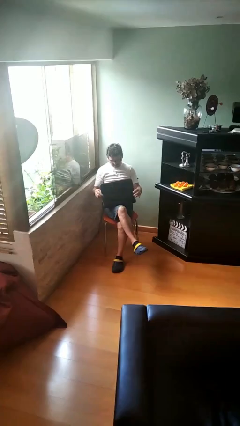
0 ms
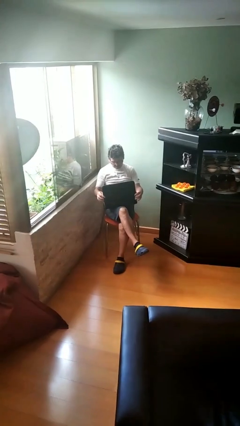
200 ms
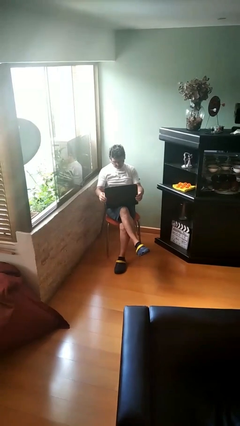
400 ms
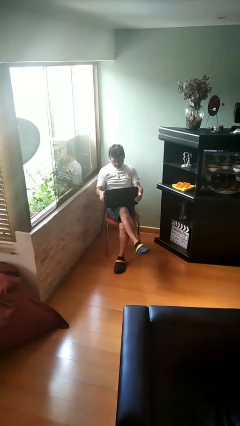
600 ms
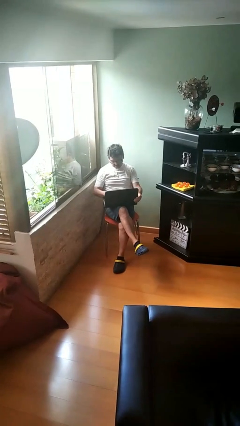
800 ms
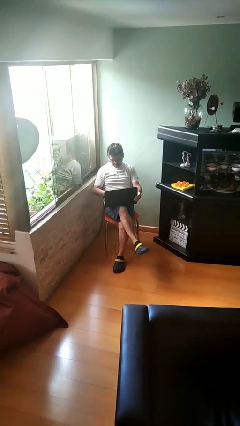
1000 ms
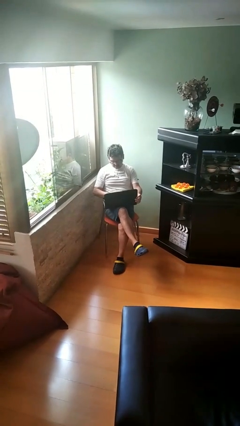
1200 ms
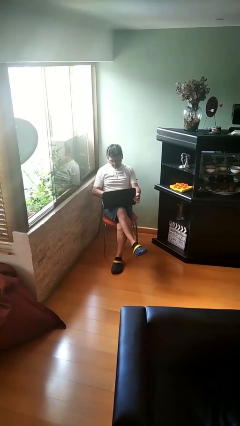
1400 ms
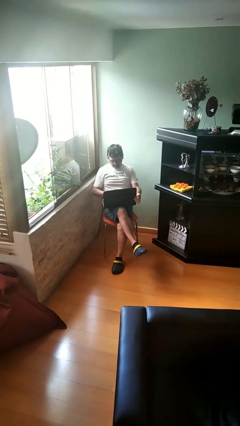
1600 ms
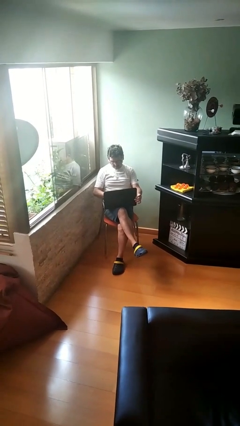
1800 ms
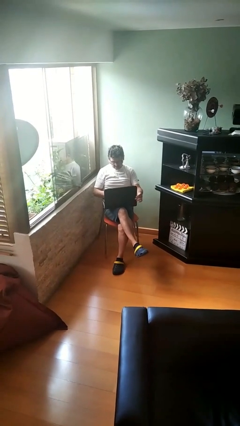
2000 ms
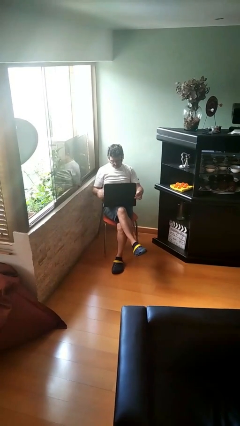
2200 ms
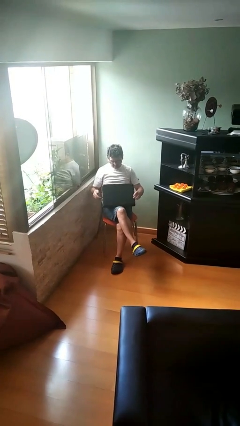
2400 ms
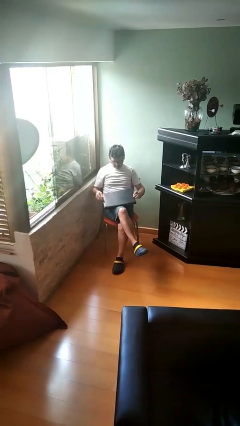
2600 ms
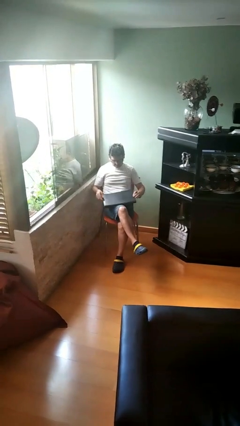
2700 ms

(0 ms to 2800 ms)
person interacts with laptop

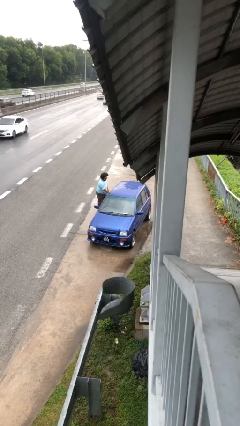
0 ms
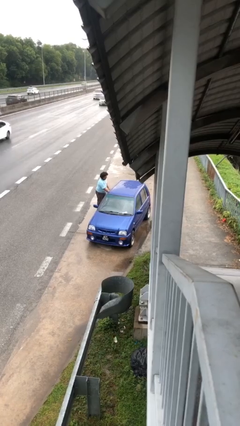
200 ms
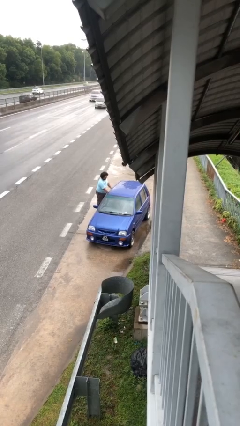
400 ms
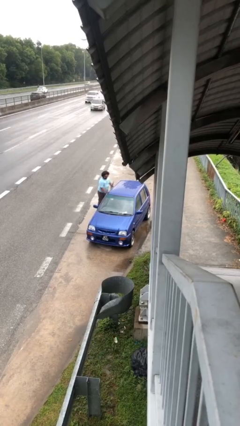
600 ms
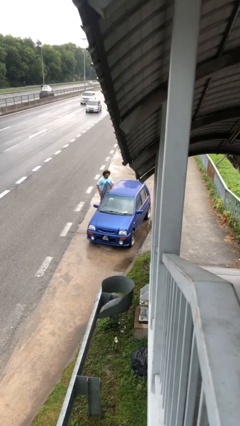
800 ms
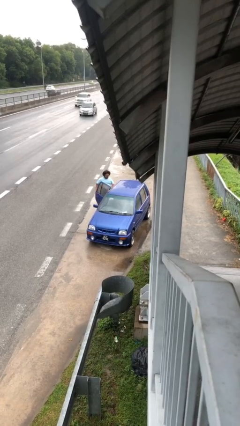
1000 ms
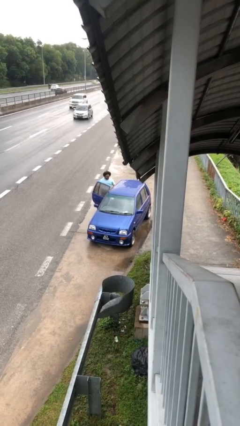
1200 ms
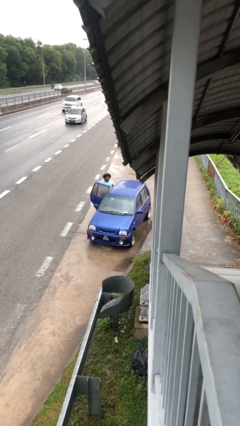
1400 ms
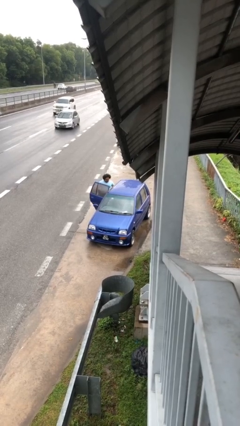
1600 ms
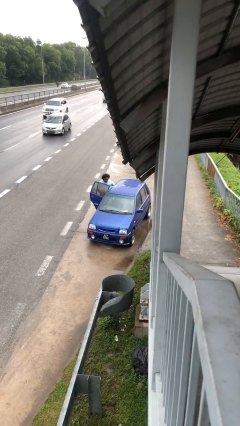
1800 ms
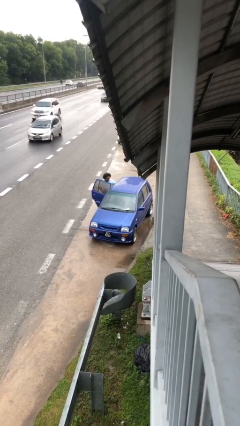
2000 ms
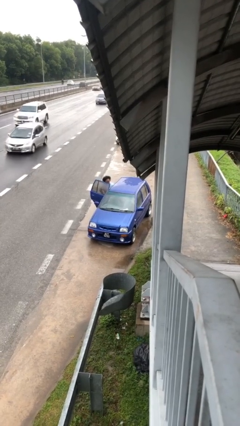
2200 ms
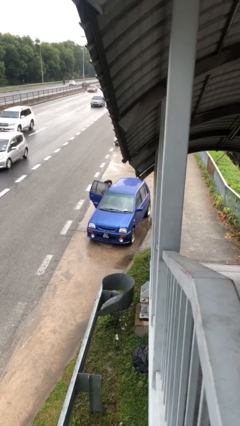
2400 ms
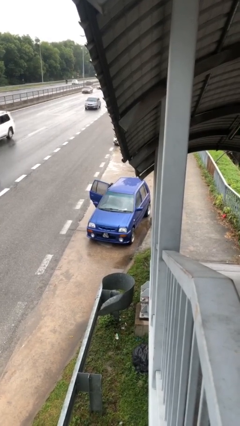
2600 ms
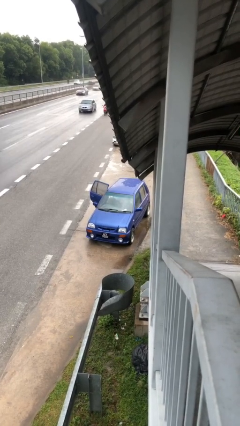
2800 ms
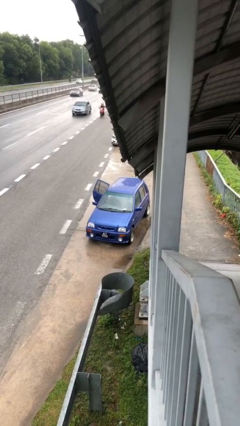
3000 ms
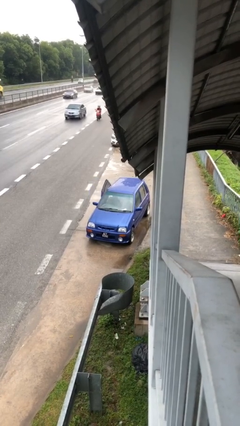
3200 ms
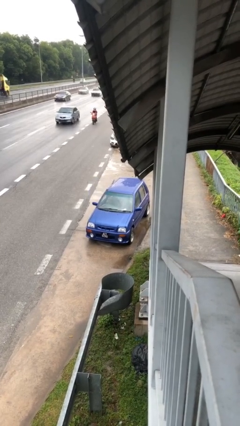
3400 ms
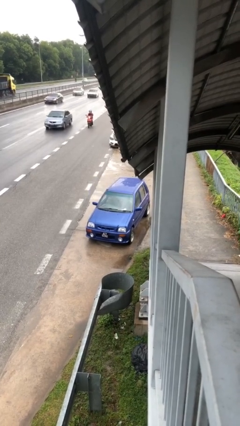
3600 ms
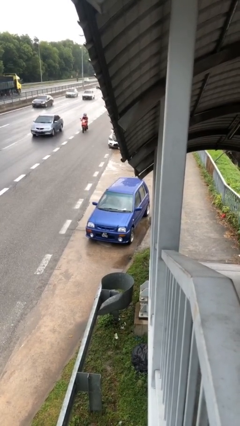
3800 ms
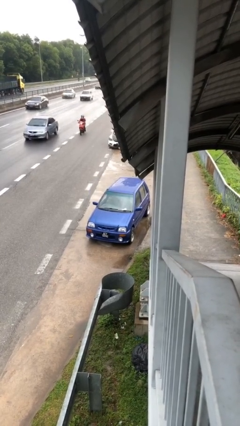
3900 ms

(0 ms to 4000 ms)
car picks up person

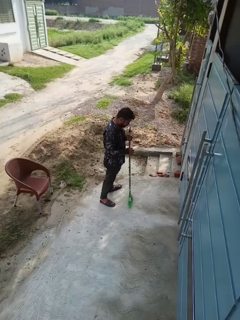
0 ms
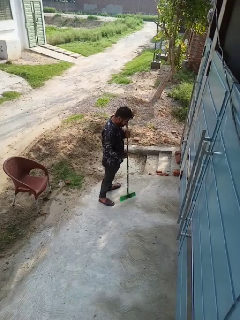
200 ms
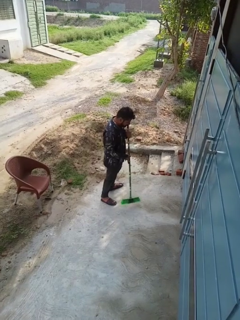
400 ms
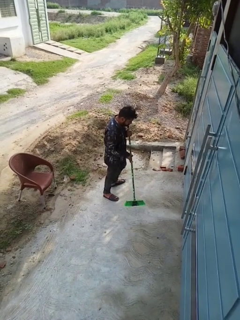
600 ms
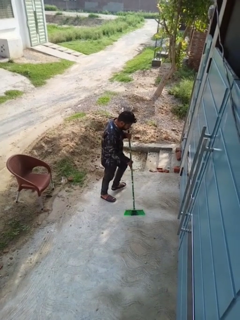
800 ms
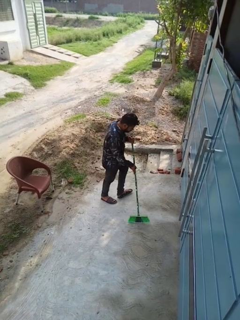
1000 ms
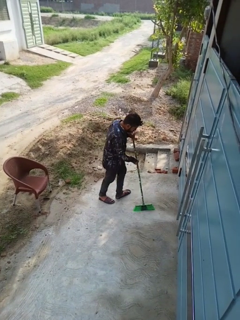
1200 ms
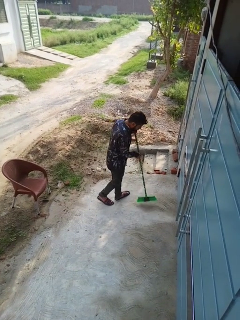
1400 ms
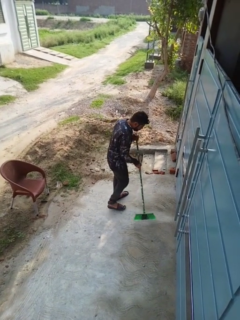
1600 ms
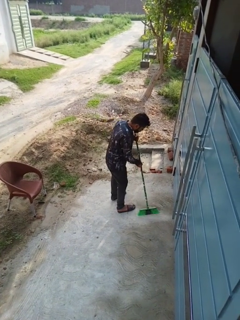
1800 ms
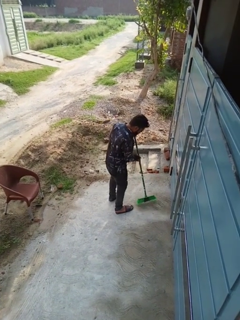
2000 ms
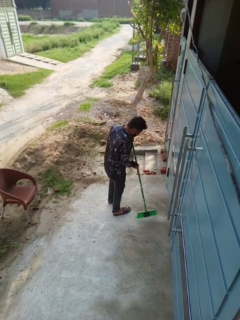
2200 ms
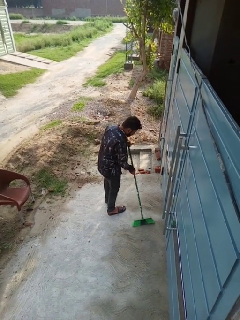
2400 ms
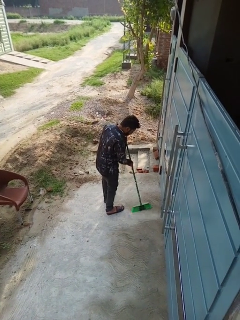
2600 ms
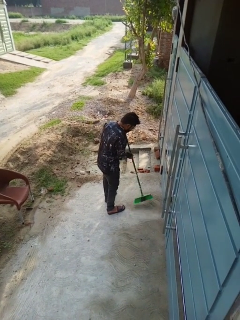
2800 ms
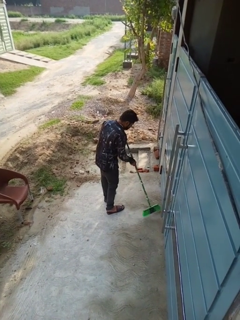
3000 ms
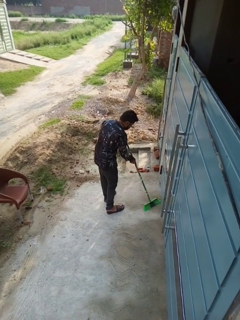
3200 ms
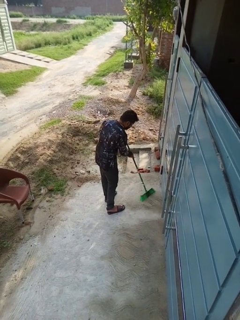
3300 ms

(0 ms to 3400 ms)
person sweeps floor

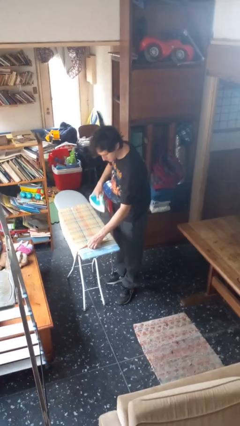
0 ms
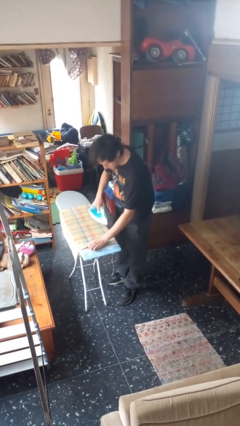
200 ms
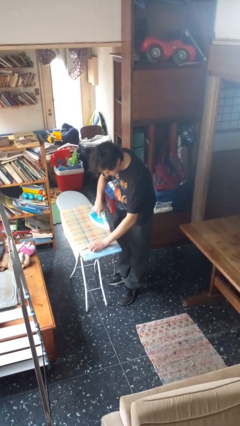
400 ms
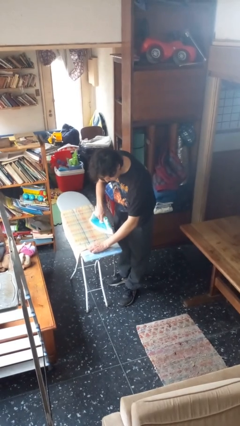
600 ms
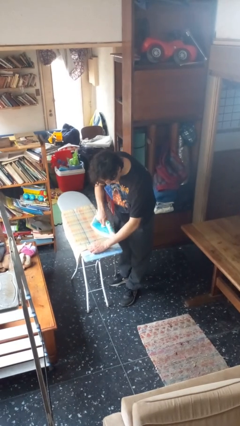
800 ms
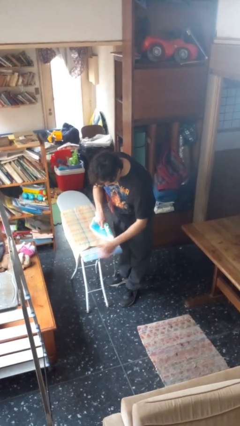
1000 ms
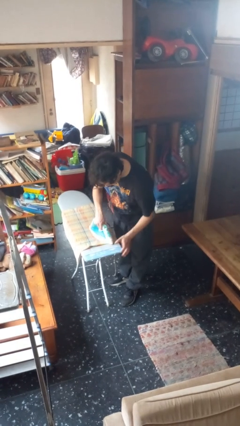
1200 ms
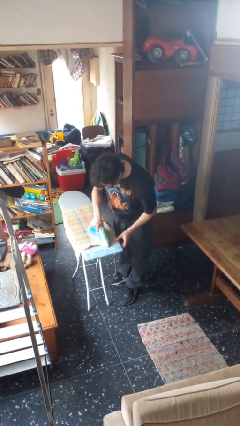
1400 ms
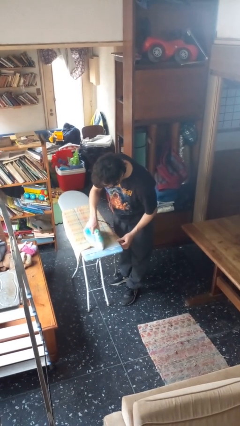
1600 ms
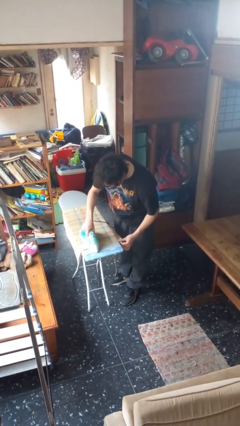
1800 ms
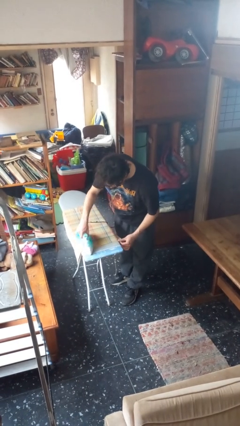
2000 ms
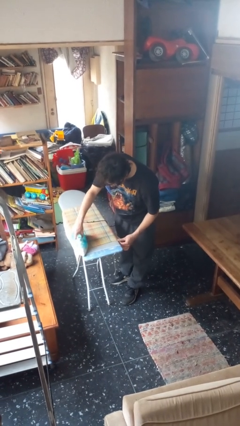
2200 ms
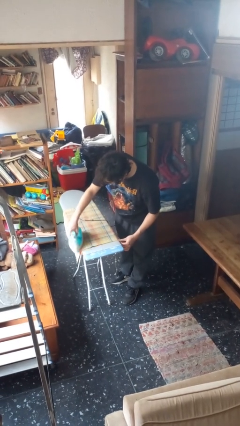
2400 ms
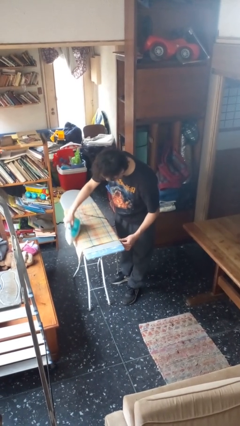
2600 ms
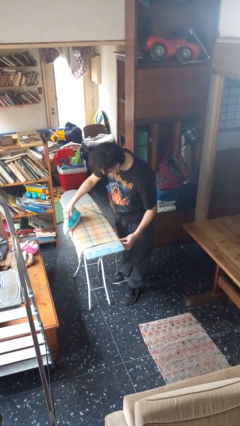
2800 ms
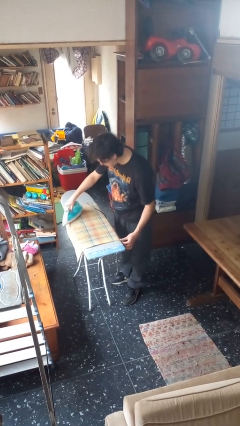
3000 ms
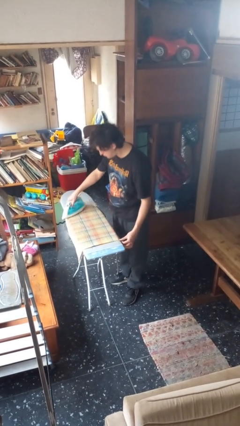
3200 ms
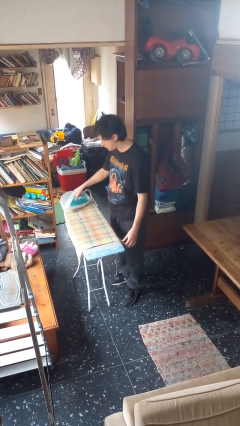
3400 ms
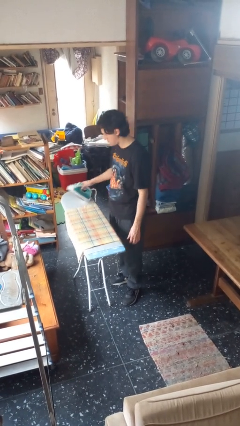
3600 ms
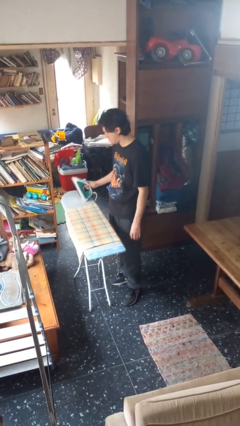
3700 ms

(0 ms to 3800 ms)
person irons clothes

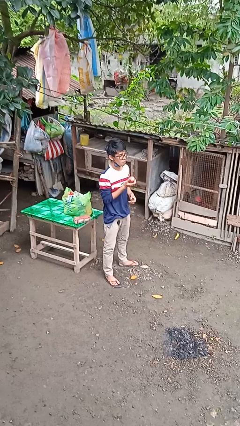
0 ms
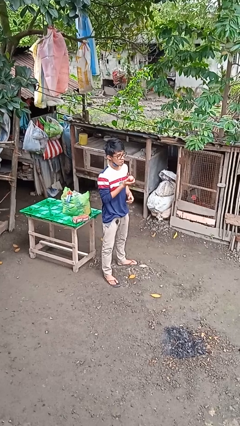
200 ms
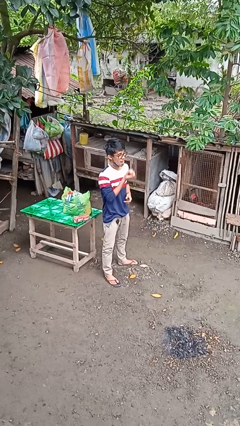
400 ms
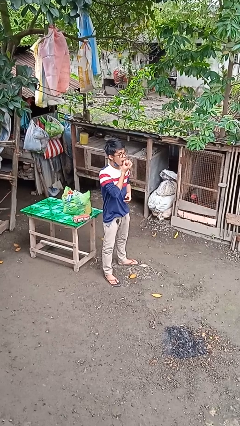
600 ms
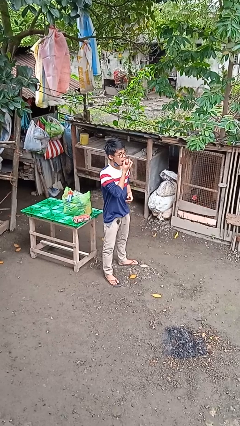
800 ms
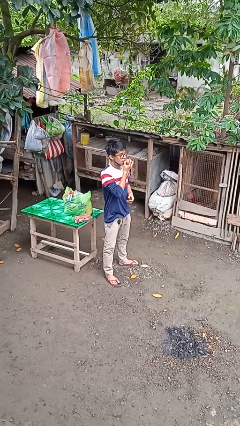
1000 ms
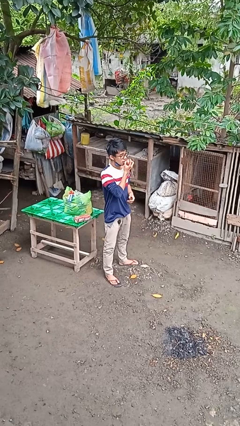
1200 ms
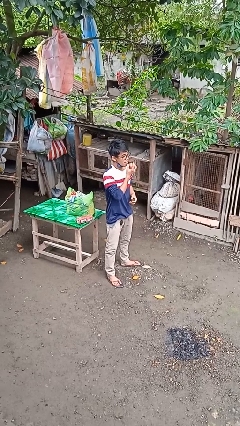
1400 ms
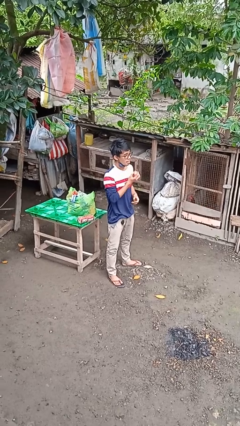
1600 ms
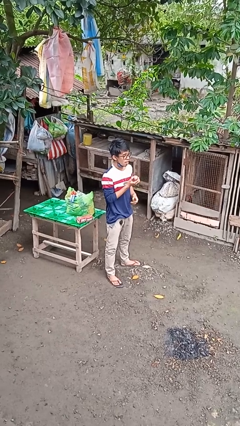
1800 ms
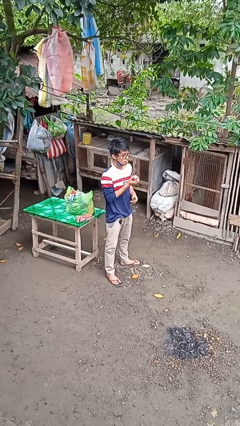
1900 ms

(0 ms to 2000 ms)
person eats apple

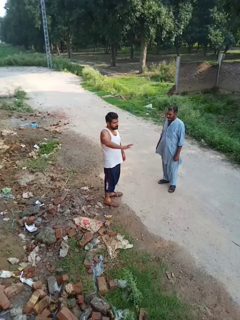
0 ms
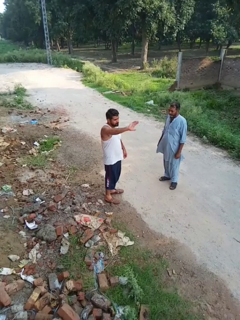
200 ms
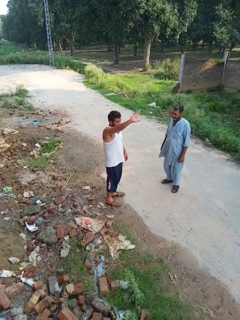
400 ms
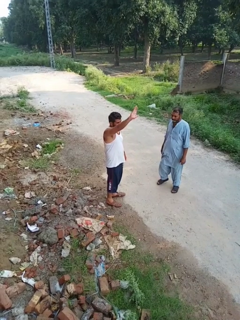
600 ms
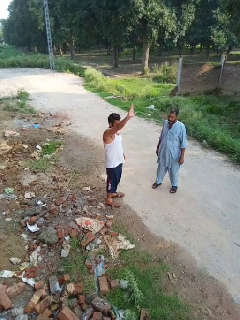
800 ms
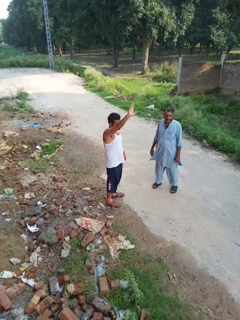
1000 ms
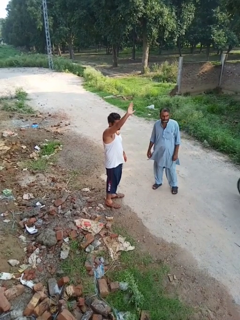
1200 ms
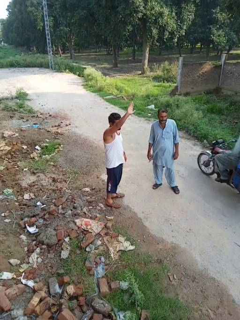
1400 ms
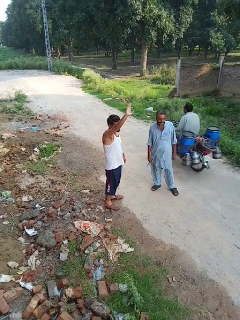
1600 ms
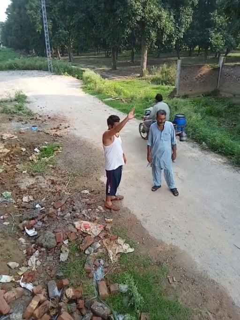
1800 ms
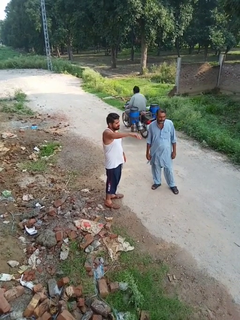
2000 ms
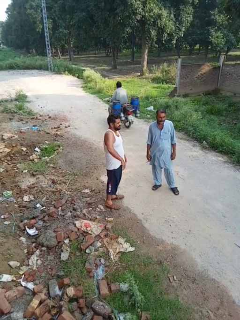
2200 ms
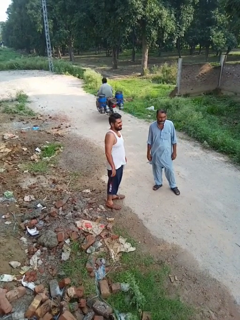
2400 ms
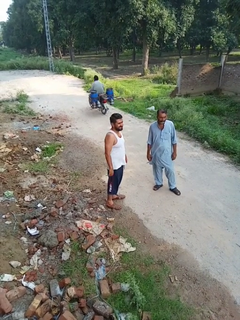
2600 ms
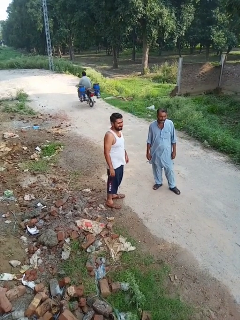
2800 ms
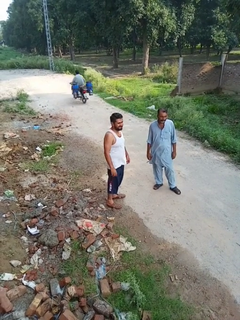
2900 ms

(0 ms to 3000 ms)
person waves at person
